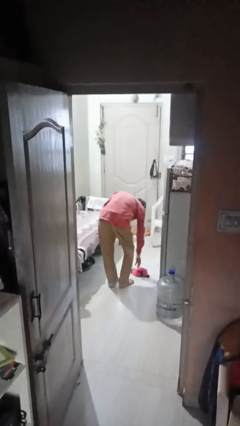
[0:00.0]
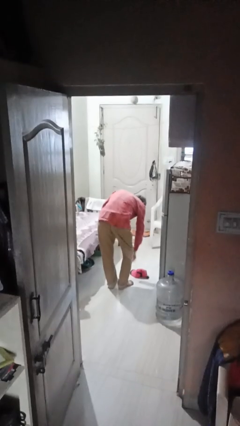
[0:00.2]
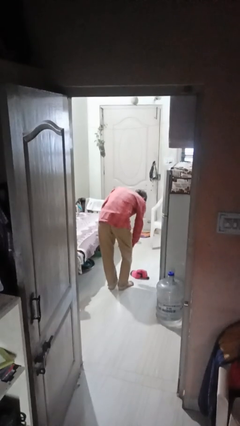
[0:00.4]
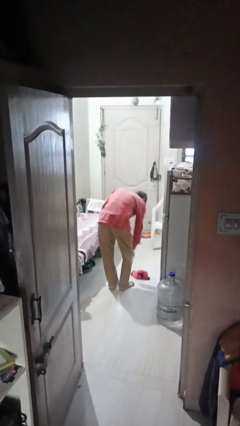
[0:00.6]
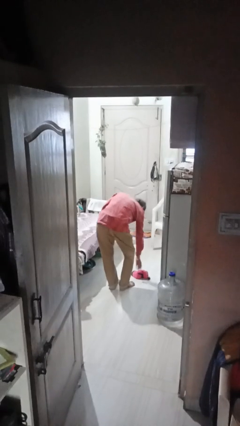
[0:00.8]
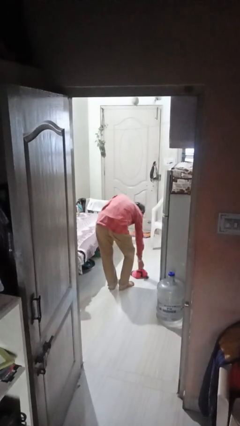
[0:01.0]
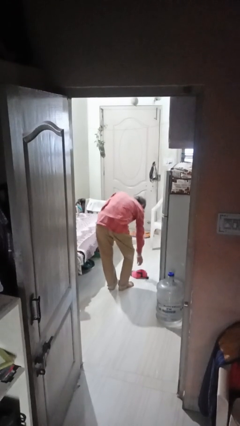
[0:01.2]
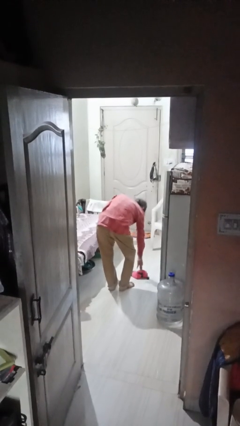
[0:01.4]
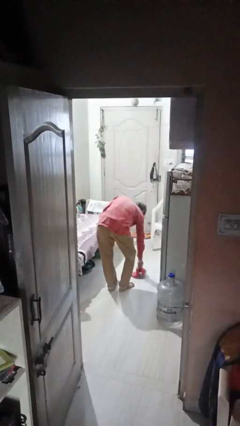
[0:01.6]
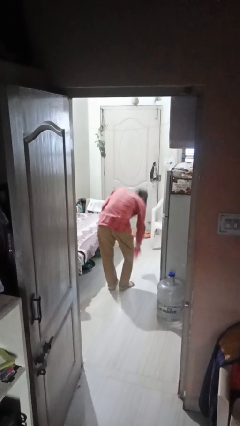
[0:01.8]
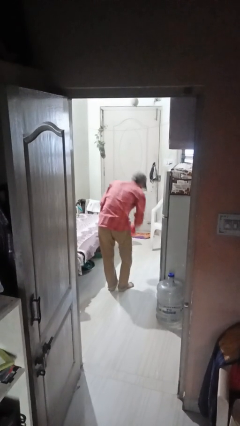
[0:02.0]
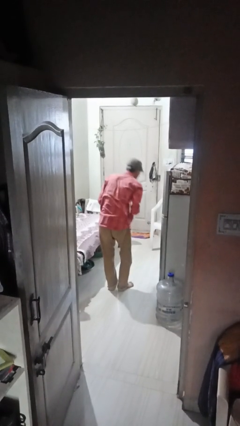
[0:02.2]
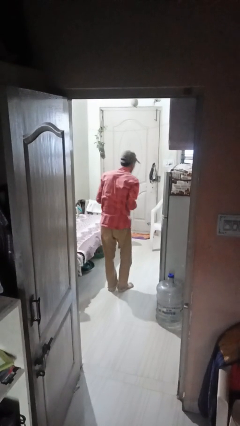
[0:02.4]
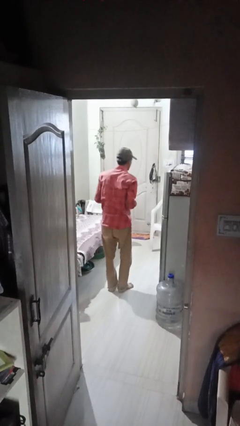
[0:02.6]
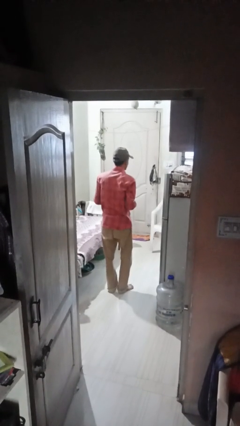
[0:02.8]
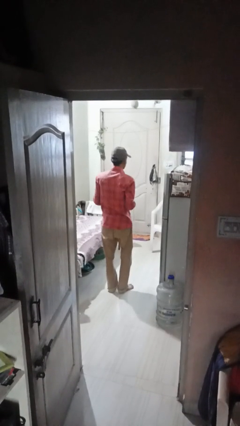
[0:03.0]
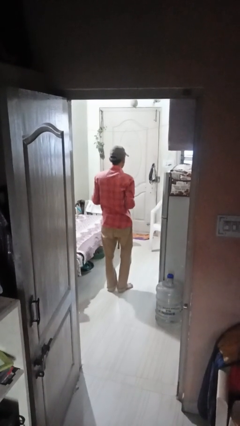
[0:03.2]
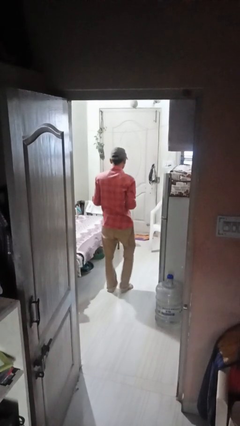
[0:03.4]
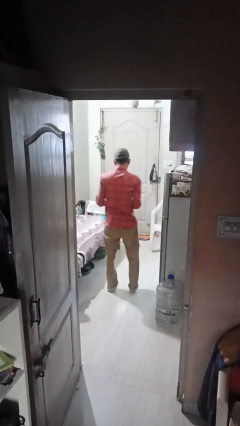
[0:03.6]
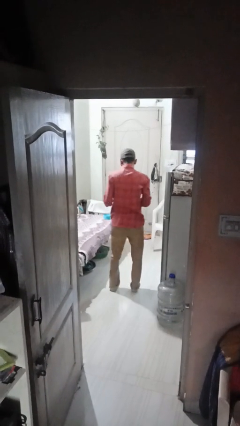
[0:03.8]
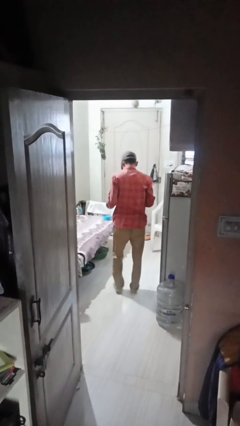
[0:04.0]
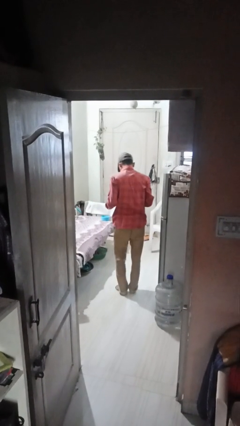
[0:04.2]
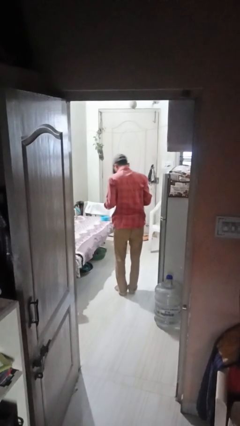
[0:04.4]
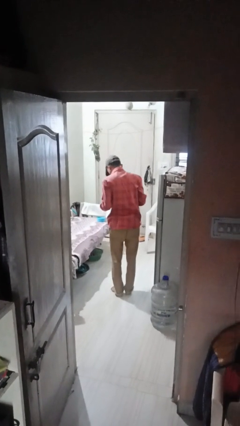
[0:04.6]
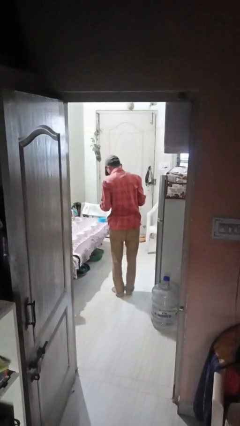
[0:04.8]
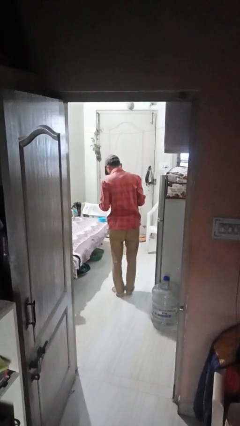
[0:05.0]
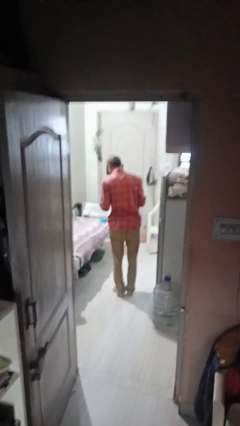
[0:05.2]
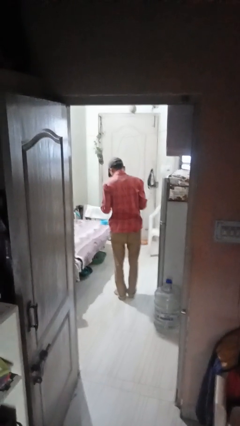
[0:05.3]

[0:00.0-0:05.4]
person picks up object from floor

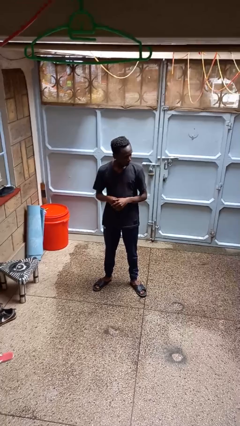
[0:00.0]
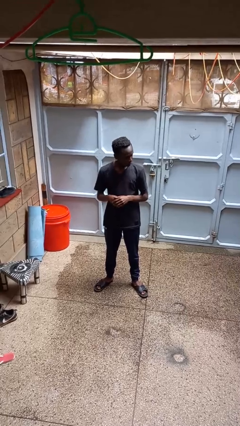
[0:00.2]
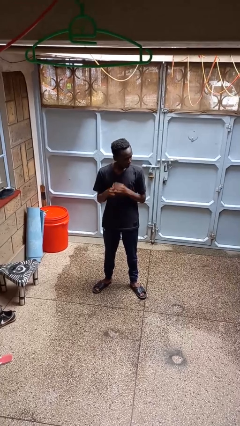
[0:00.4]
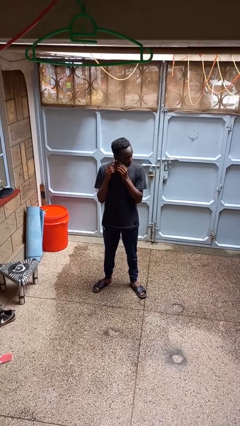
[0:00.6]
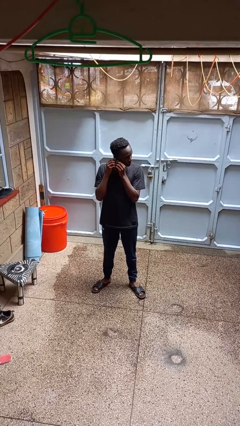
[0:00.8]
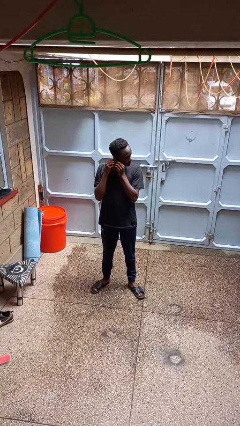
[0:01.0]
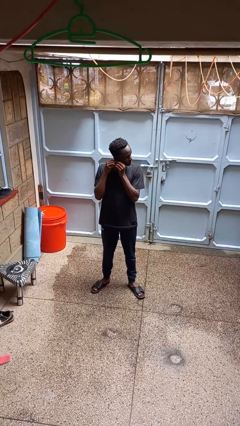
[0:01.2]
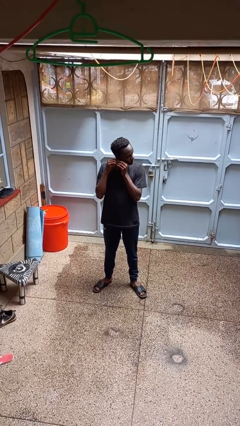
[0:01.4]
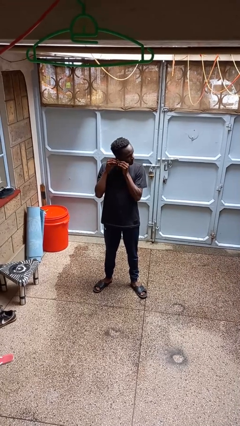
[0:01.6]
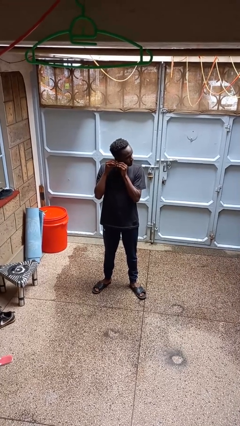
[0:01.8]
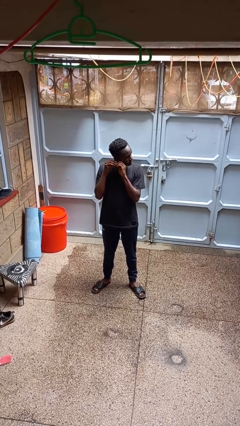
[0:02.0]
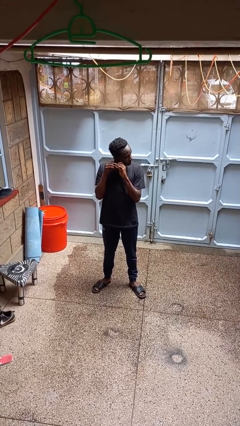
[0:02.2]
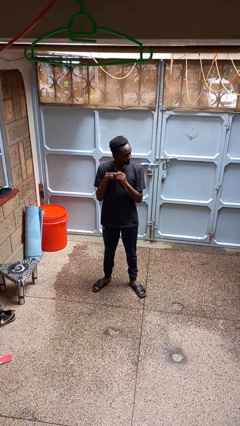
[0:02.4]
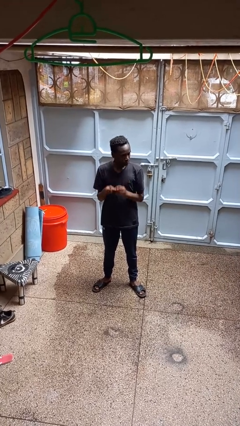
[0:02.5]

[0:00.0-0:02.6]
person takes off earrings

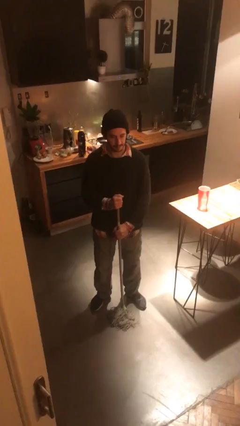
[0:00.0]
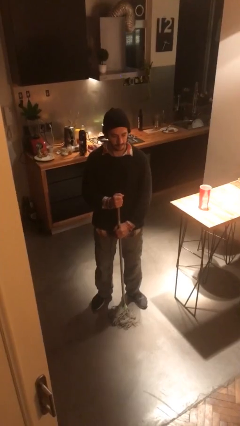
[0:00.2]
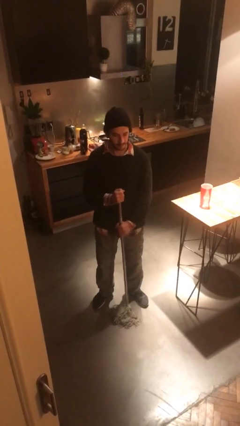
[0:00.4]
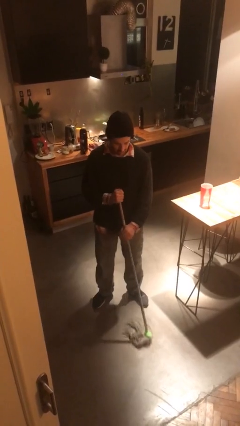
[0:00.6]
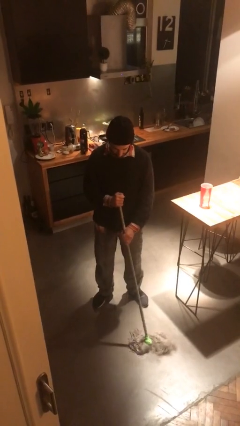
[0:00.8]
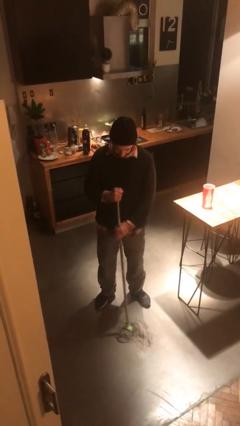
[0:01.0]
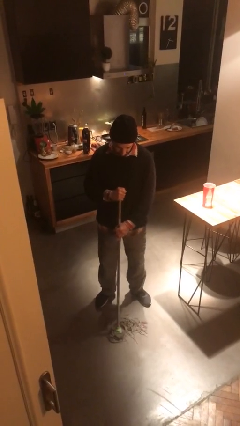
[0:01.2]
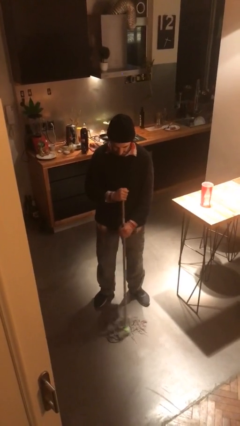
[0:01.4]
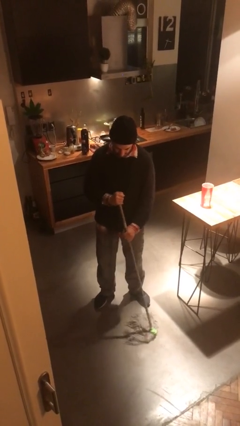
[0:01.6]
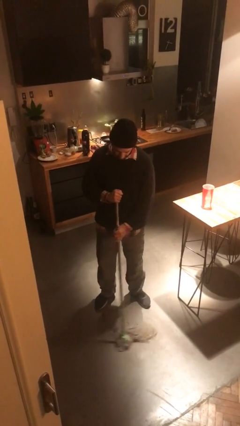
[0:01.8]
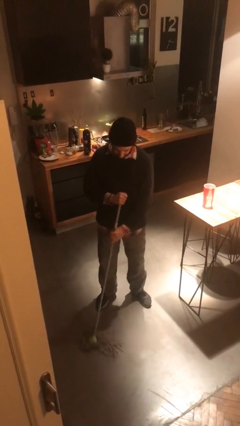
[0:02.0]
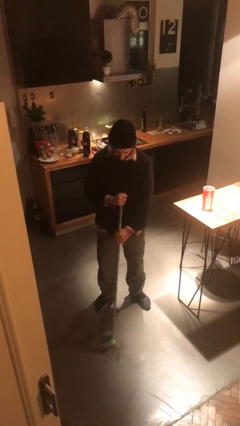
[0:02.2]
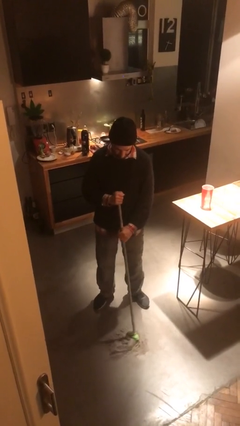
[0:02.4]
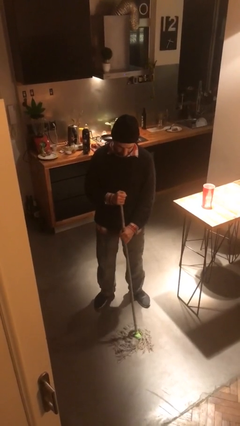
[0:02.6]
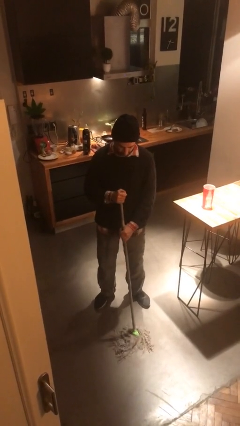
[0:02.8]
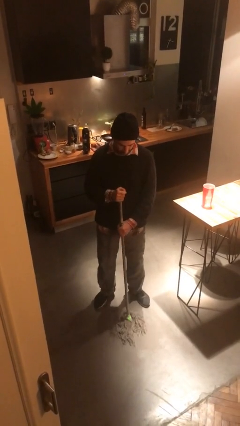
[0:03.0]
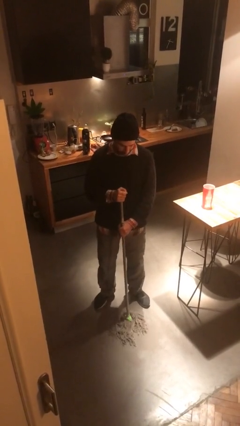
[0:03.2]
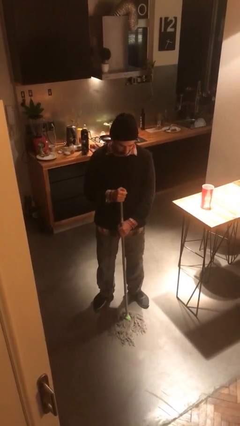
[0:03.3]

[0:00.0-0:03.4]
person mops

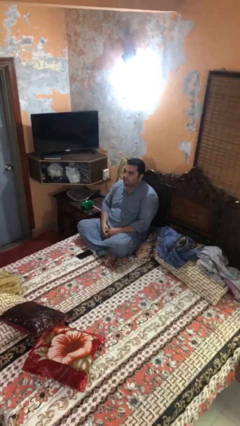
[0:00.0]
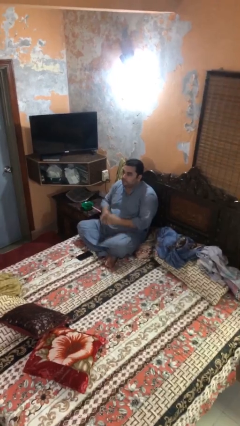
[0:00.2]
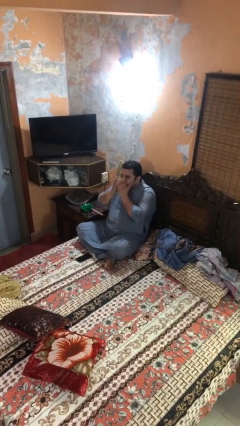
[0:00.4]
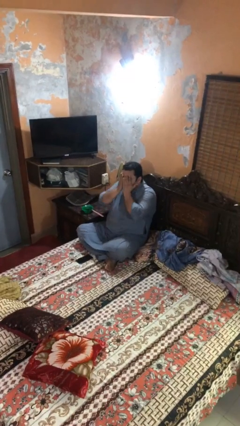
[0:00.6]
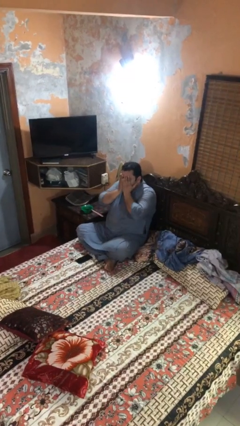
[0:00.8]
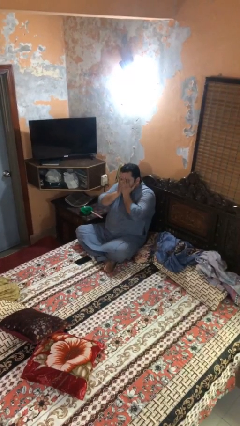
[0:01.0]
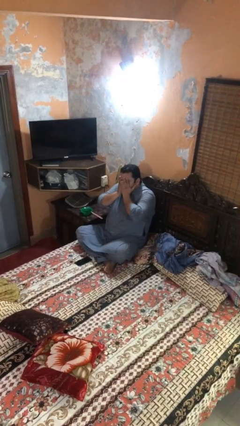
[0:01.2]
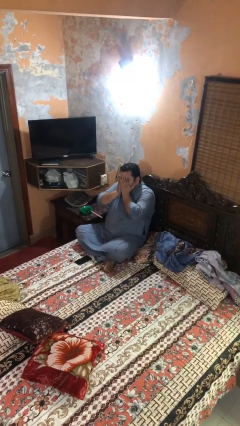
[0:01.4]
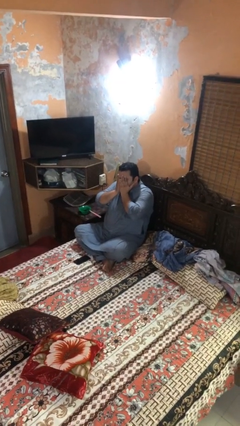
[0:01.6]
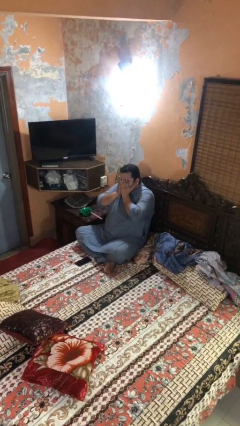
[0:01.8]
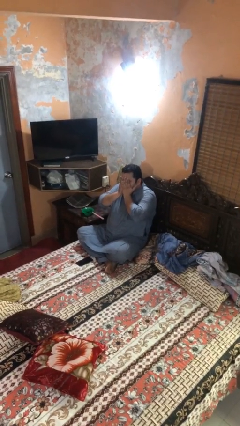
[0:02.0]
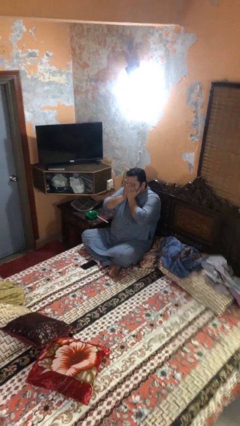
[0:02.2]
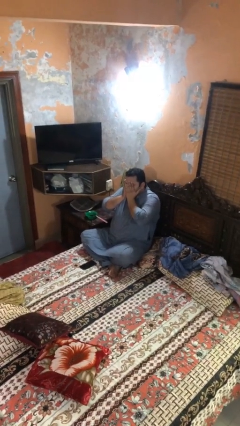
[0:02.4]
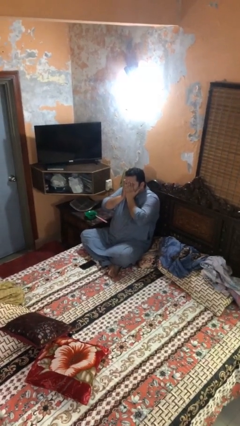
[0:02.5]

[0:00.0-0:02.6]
person covers face with hands

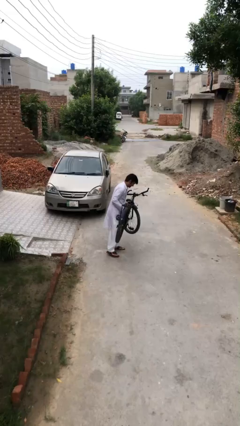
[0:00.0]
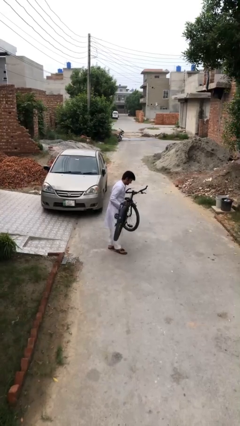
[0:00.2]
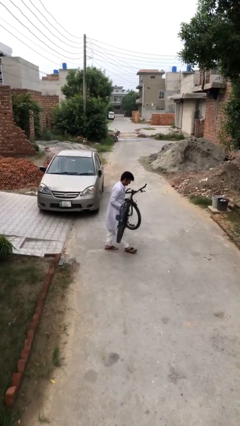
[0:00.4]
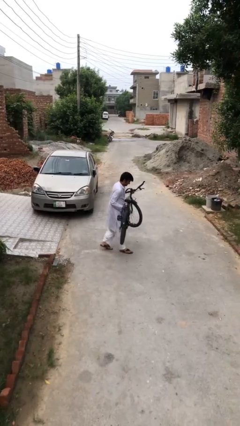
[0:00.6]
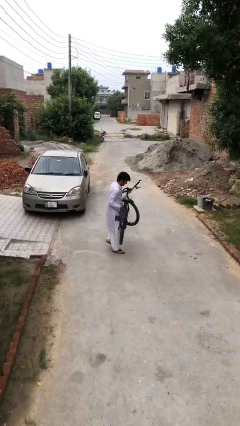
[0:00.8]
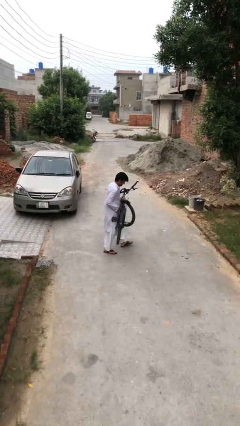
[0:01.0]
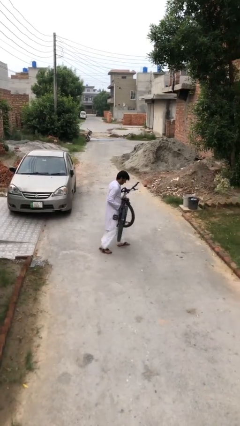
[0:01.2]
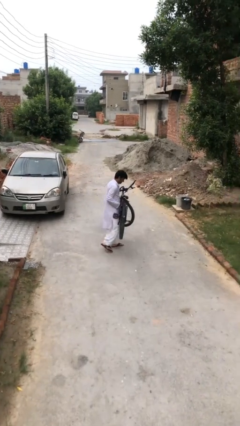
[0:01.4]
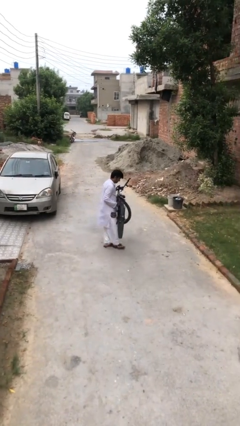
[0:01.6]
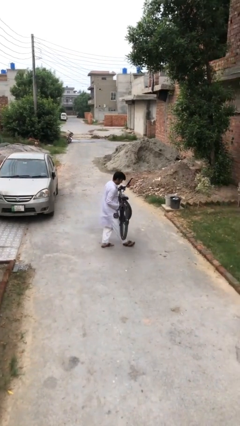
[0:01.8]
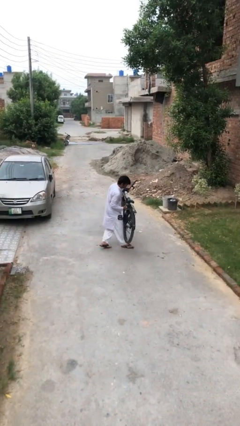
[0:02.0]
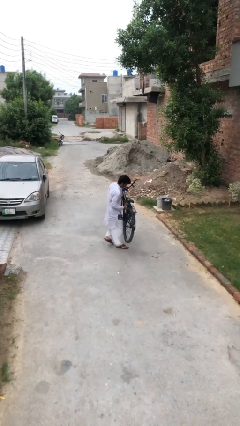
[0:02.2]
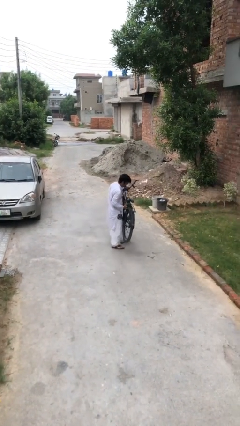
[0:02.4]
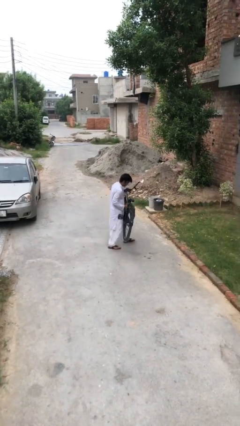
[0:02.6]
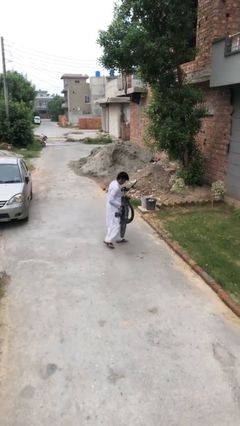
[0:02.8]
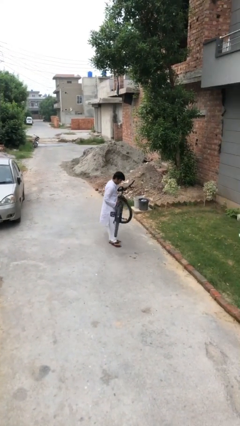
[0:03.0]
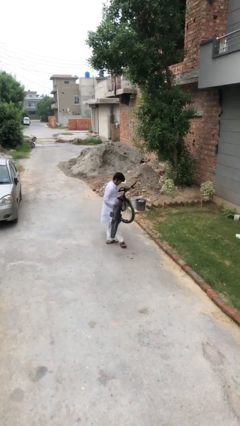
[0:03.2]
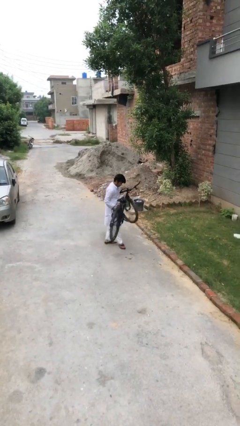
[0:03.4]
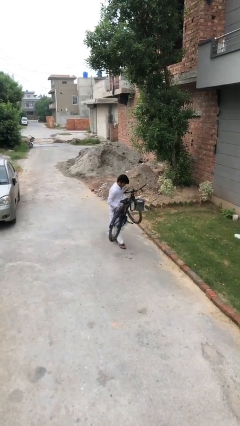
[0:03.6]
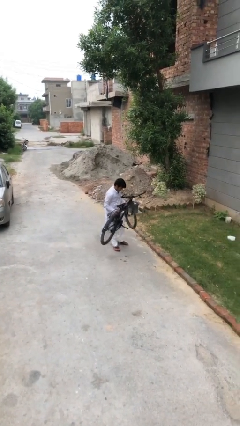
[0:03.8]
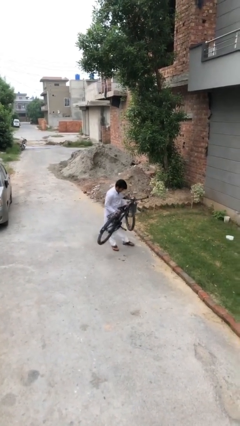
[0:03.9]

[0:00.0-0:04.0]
person carries heavy object
